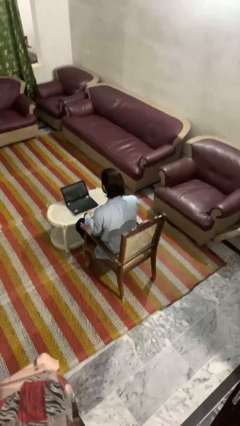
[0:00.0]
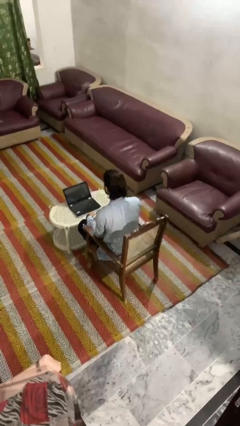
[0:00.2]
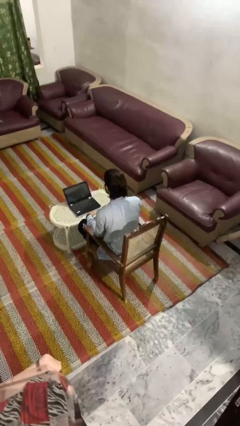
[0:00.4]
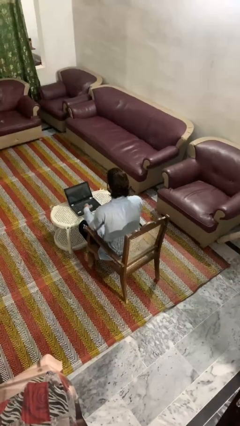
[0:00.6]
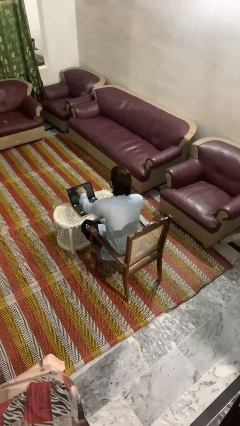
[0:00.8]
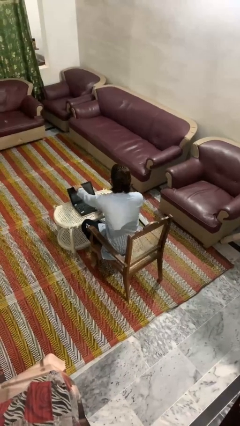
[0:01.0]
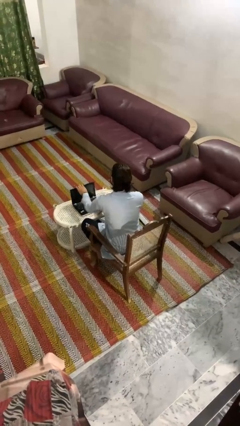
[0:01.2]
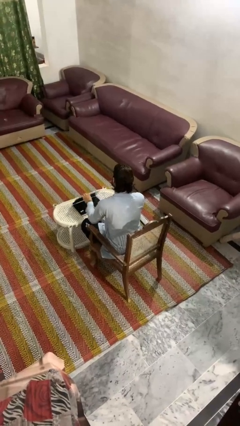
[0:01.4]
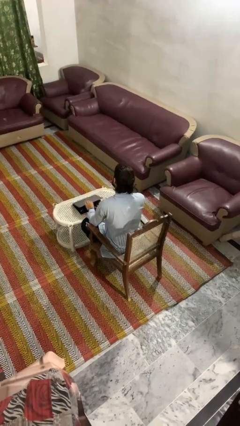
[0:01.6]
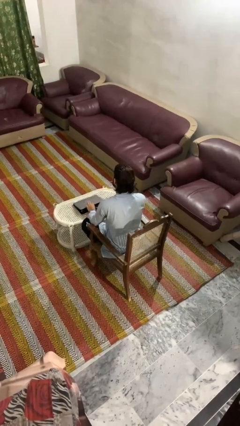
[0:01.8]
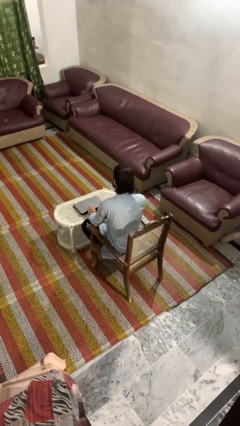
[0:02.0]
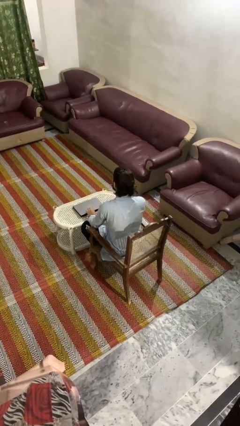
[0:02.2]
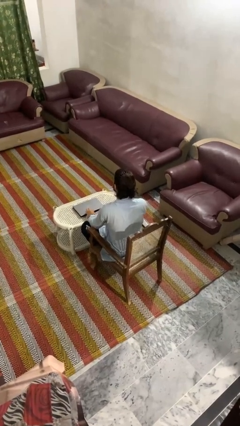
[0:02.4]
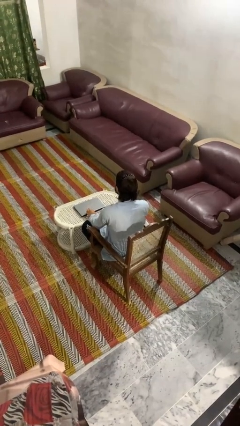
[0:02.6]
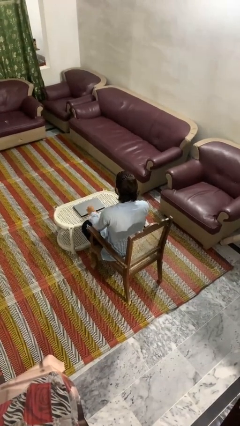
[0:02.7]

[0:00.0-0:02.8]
person closes laptop

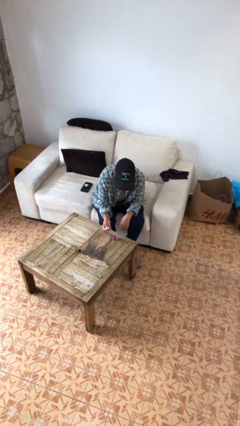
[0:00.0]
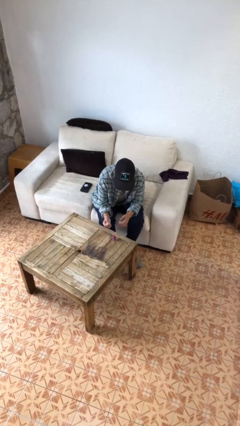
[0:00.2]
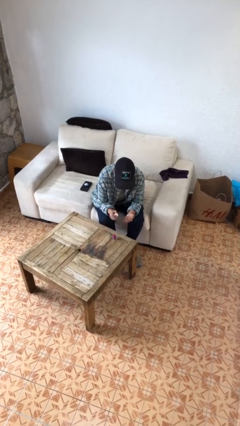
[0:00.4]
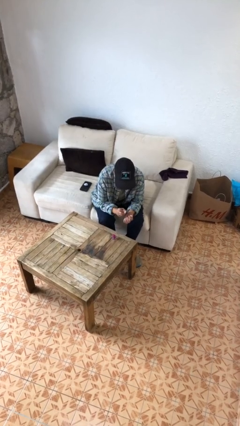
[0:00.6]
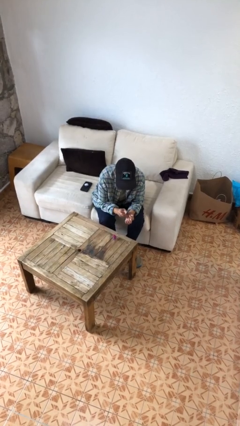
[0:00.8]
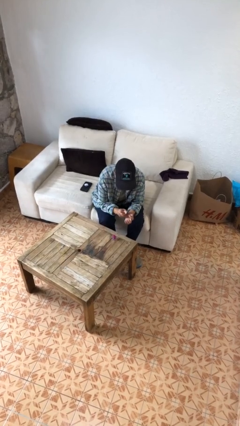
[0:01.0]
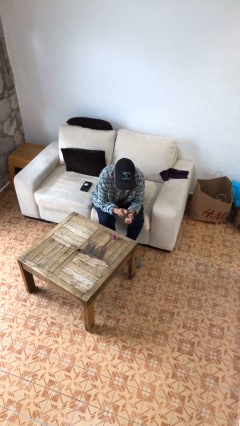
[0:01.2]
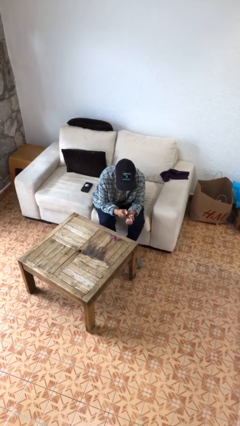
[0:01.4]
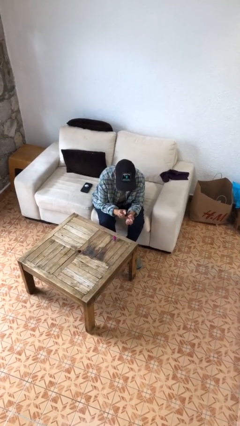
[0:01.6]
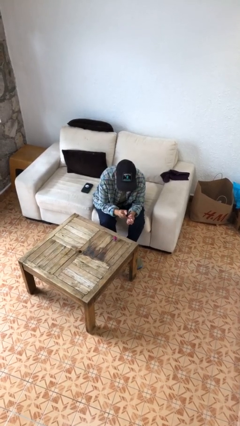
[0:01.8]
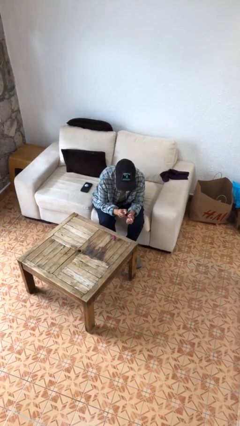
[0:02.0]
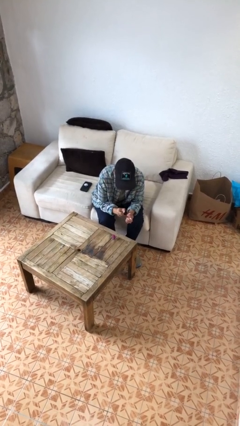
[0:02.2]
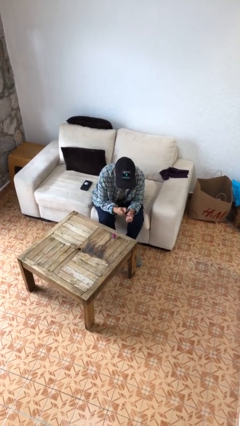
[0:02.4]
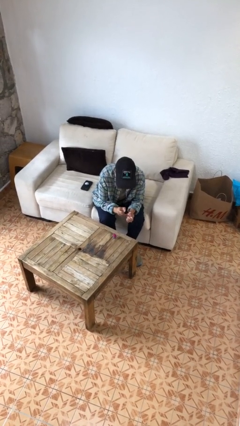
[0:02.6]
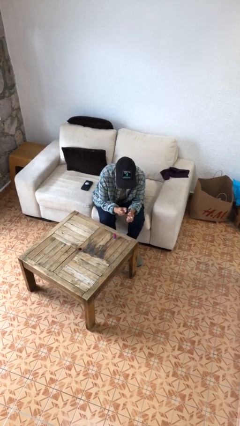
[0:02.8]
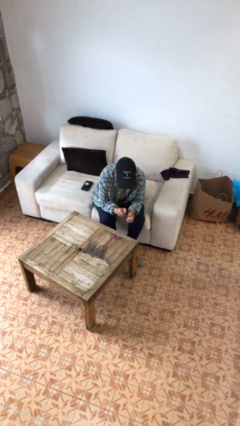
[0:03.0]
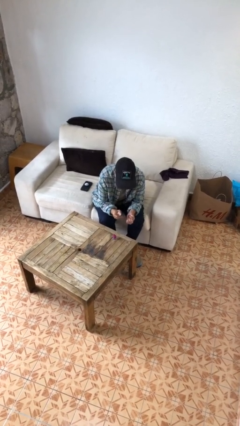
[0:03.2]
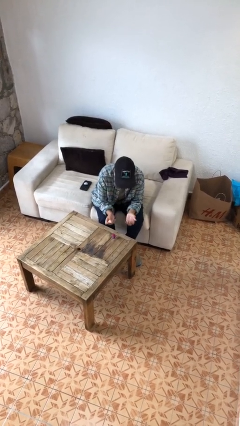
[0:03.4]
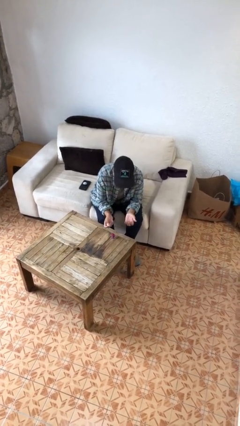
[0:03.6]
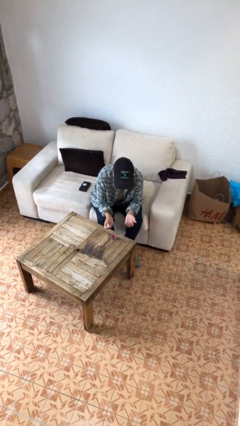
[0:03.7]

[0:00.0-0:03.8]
person paints fingernails

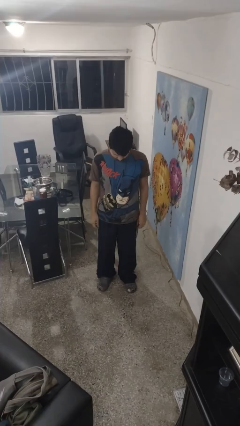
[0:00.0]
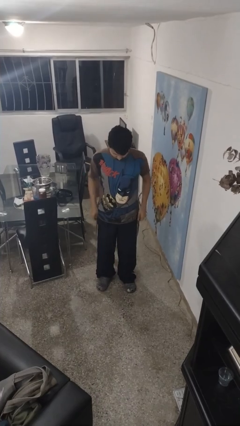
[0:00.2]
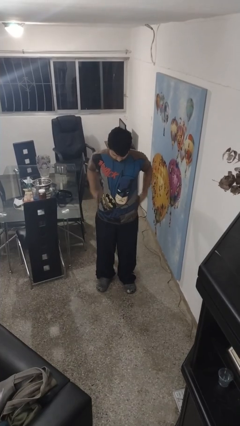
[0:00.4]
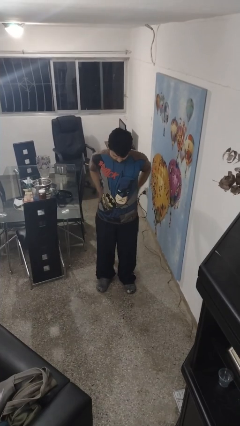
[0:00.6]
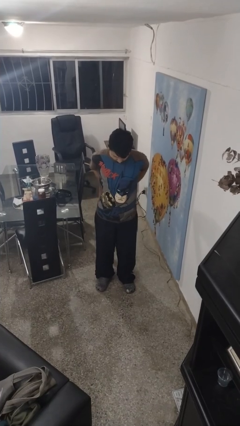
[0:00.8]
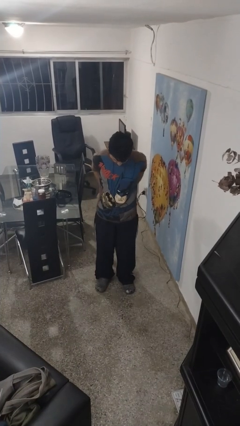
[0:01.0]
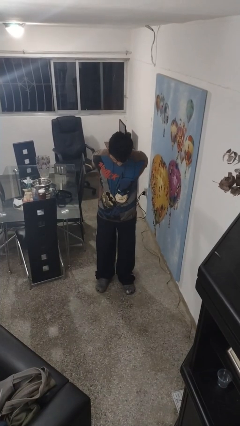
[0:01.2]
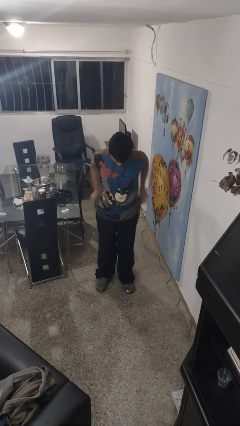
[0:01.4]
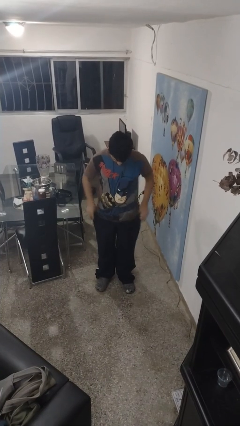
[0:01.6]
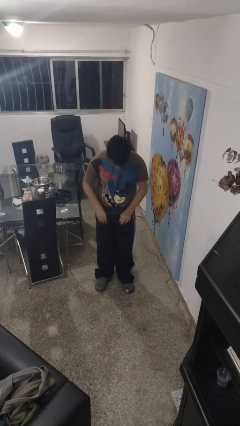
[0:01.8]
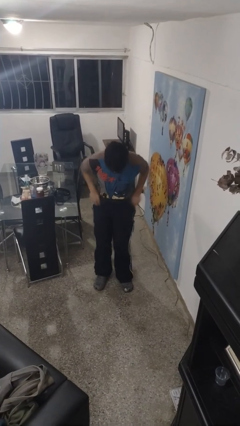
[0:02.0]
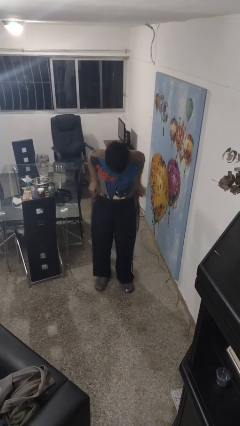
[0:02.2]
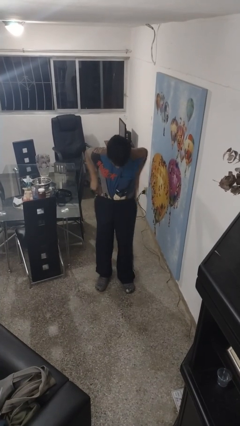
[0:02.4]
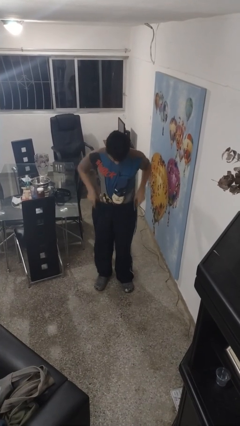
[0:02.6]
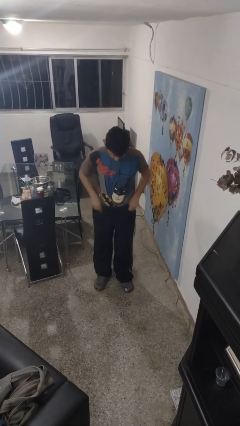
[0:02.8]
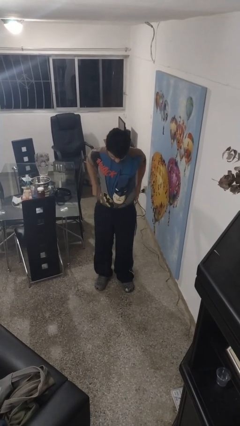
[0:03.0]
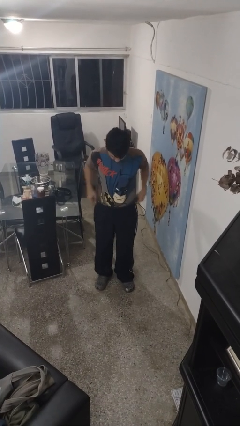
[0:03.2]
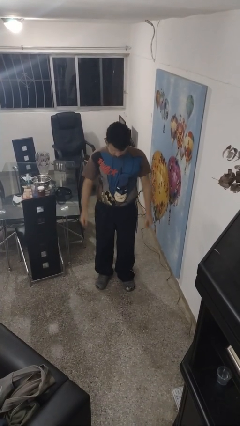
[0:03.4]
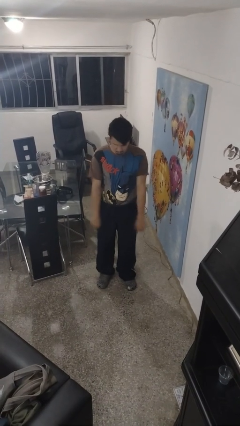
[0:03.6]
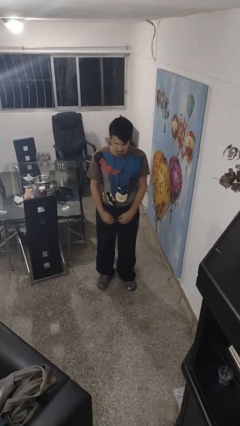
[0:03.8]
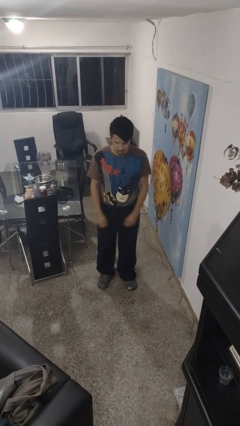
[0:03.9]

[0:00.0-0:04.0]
person tucks in shirt

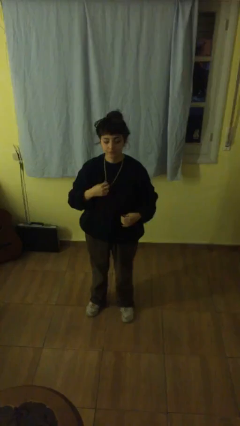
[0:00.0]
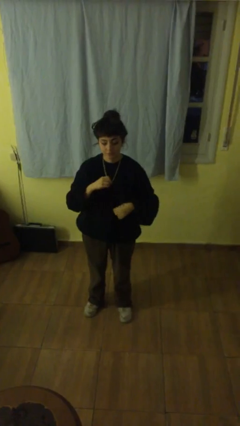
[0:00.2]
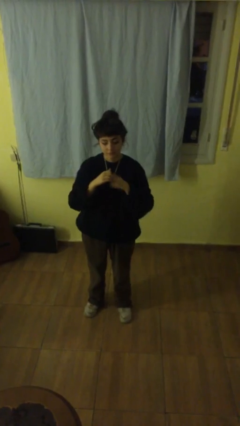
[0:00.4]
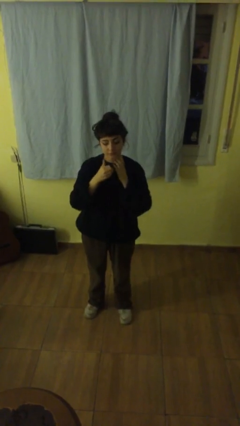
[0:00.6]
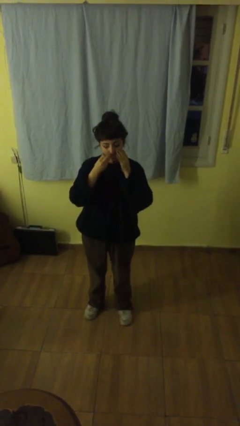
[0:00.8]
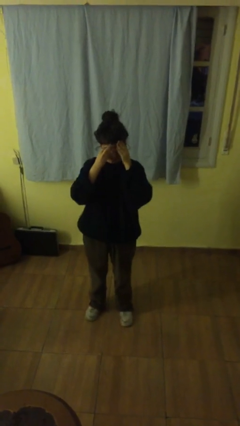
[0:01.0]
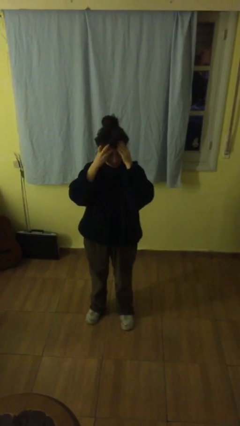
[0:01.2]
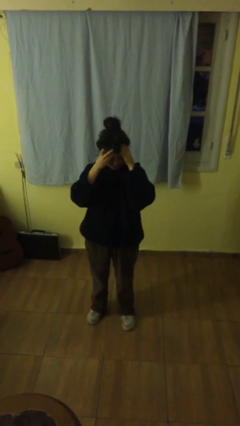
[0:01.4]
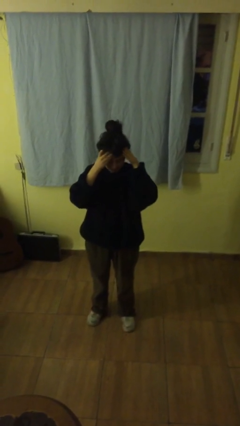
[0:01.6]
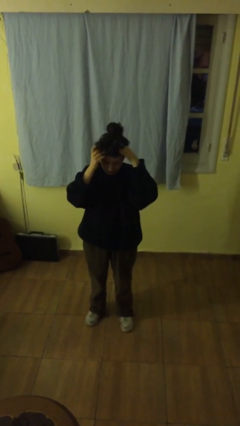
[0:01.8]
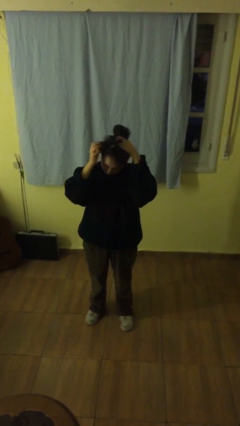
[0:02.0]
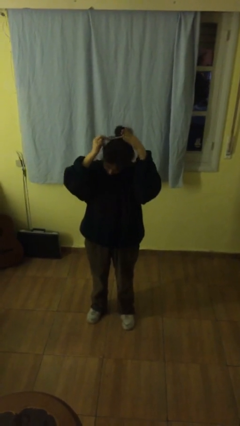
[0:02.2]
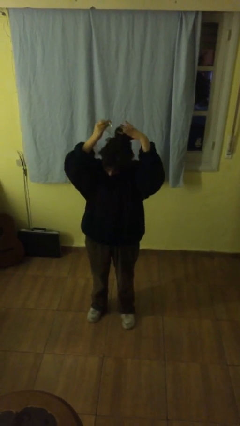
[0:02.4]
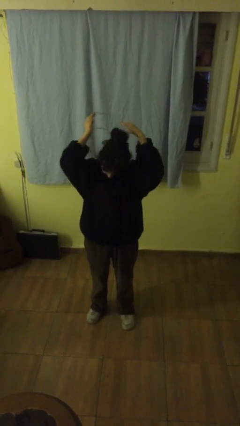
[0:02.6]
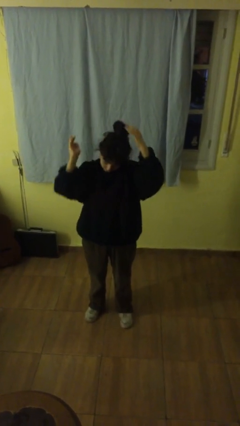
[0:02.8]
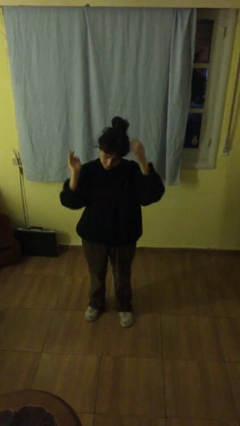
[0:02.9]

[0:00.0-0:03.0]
person takes off necklace

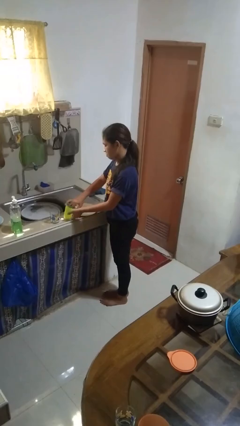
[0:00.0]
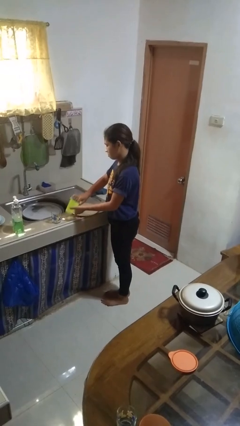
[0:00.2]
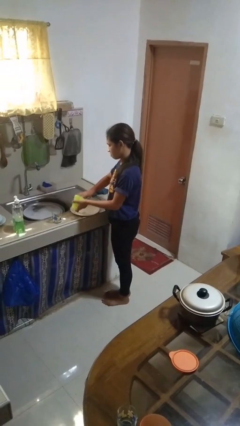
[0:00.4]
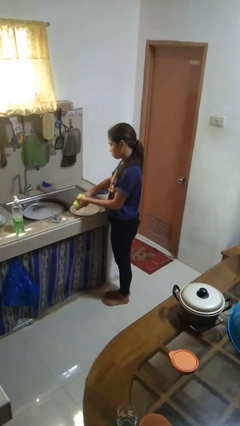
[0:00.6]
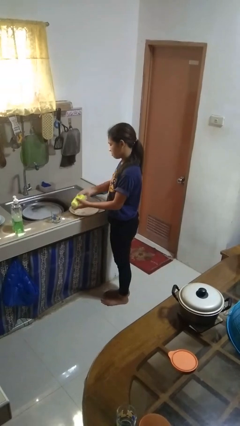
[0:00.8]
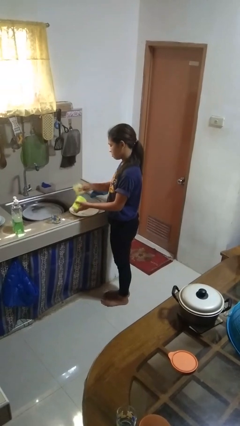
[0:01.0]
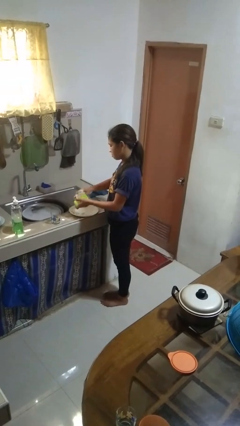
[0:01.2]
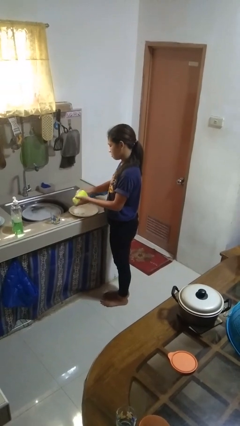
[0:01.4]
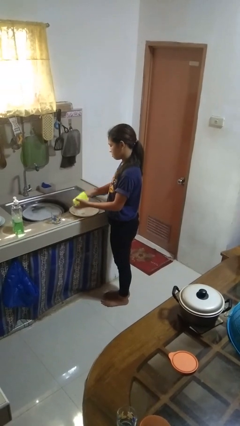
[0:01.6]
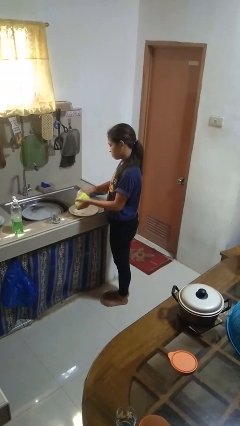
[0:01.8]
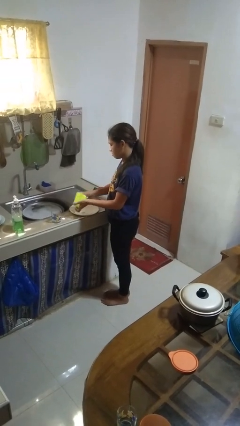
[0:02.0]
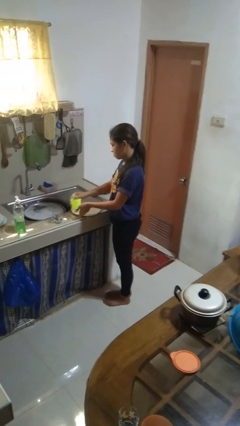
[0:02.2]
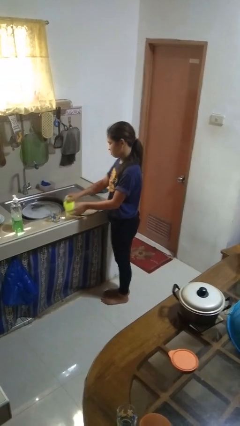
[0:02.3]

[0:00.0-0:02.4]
person washes dish

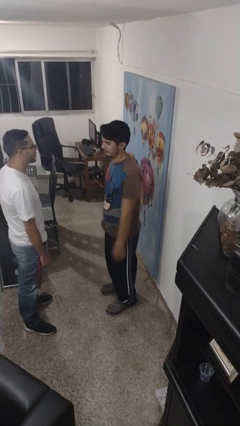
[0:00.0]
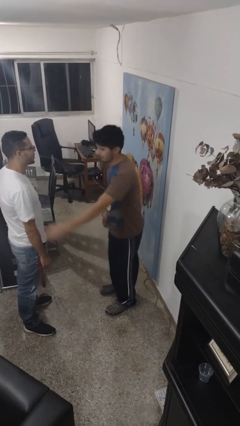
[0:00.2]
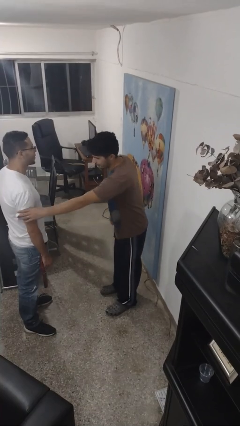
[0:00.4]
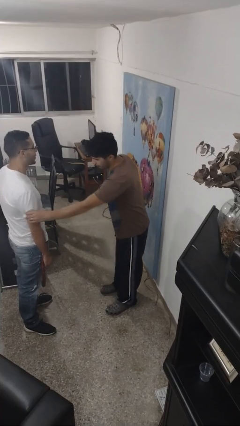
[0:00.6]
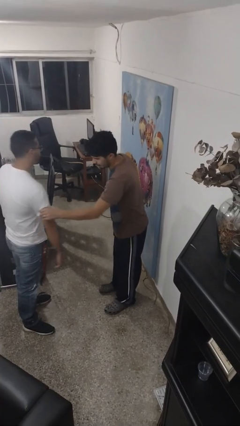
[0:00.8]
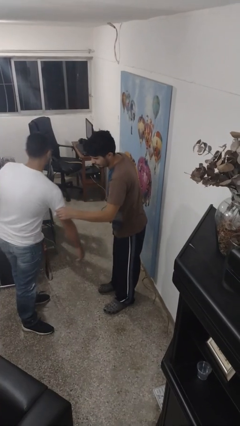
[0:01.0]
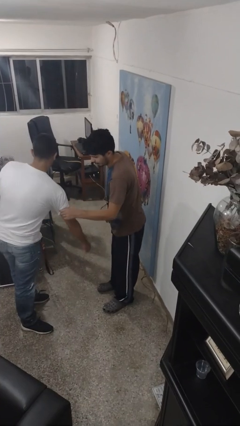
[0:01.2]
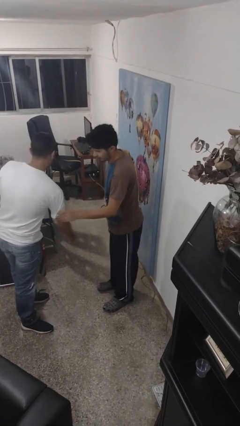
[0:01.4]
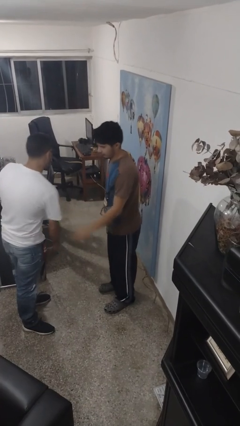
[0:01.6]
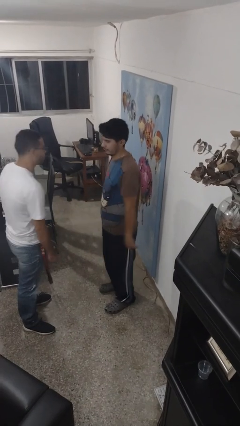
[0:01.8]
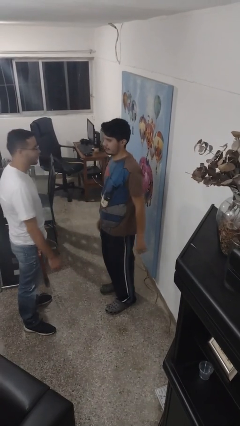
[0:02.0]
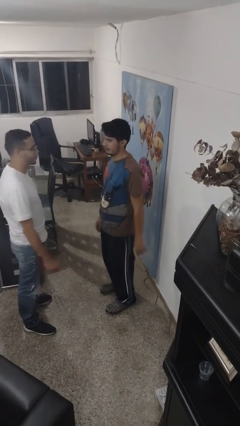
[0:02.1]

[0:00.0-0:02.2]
person grabs person by bicep
